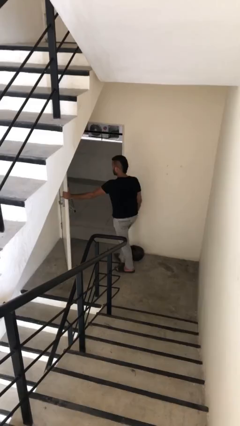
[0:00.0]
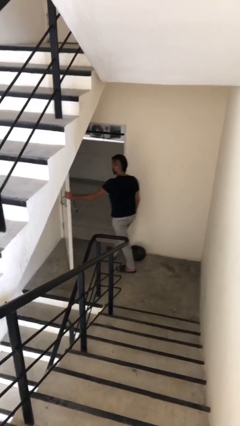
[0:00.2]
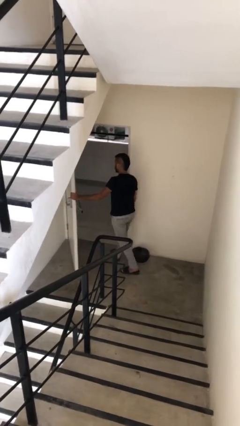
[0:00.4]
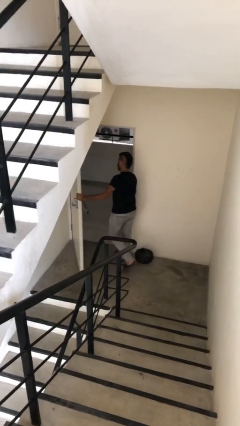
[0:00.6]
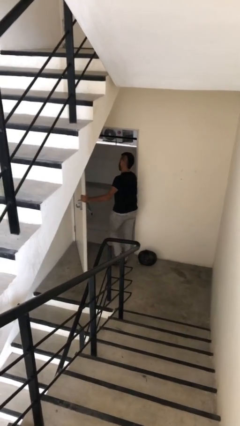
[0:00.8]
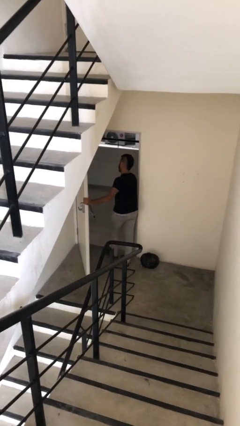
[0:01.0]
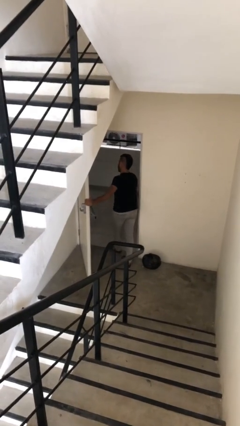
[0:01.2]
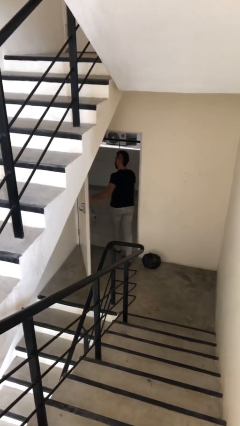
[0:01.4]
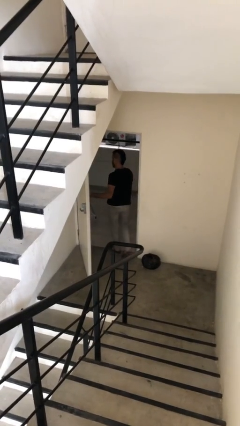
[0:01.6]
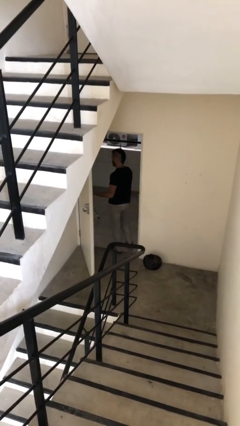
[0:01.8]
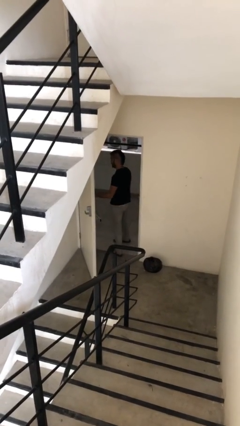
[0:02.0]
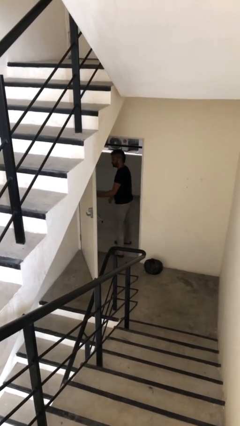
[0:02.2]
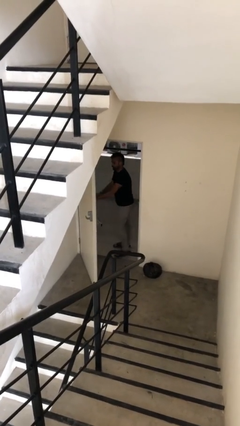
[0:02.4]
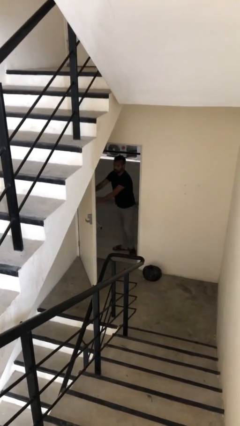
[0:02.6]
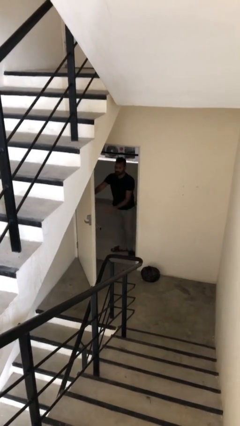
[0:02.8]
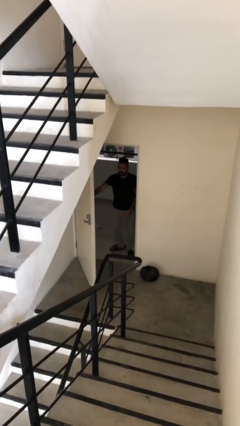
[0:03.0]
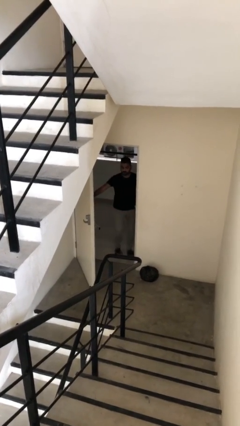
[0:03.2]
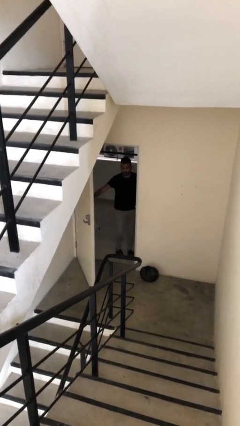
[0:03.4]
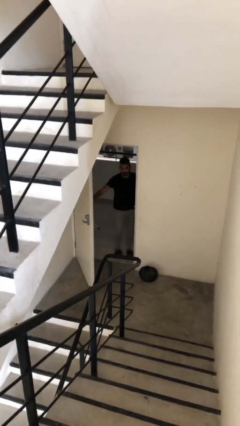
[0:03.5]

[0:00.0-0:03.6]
person exits scene through structure

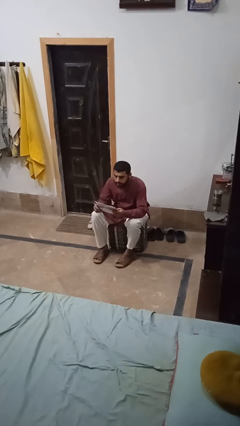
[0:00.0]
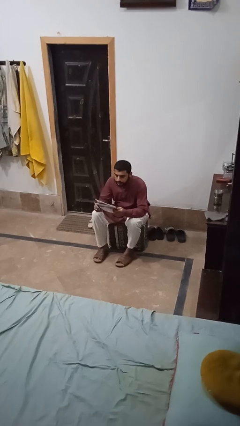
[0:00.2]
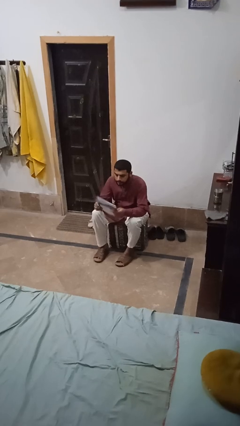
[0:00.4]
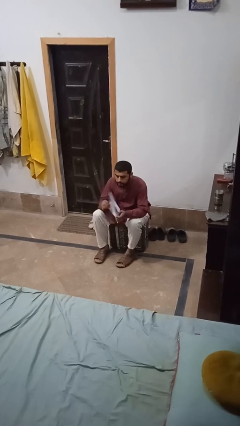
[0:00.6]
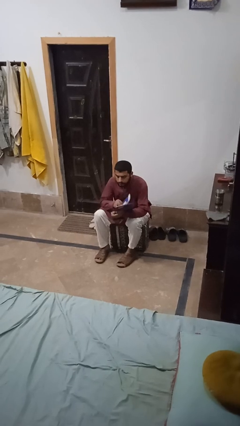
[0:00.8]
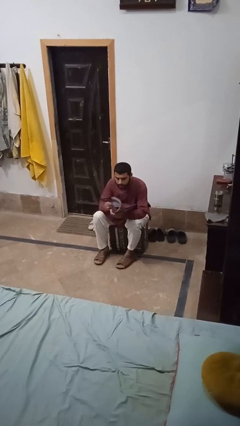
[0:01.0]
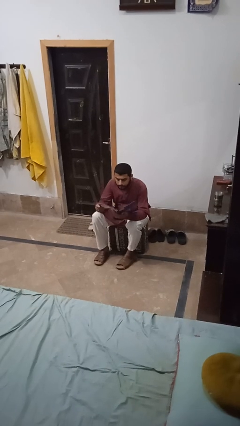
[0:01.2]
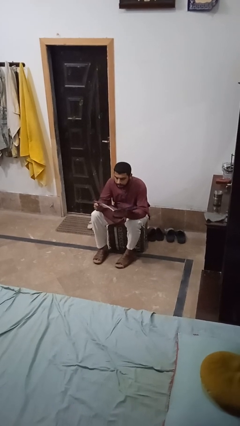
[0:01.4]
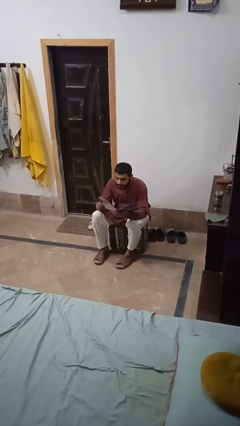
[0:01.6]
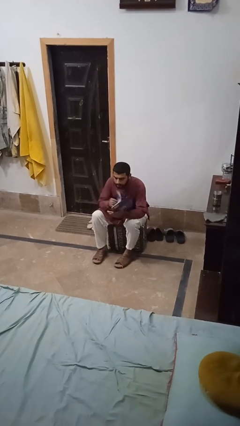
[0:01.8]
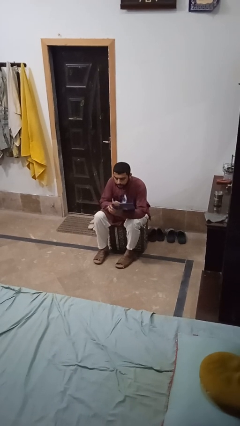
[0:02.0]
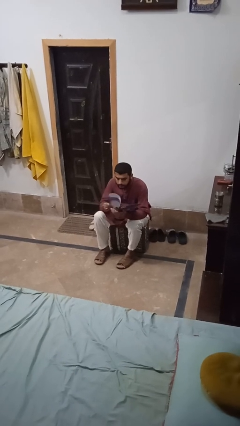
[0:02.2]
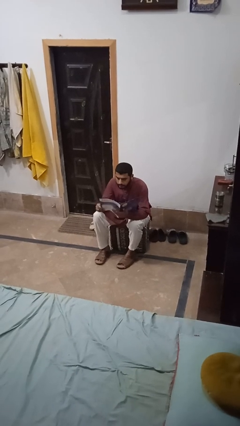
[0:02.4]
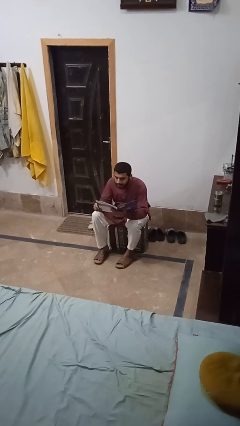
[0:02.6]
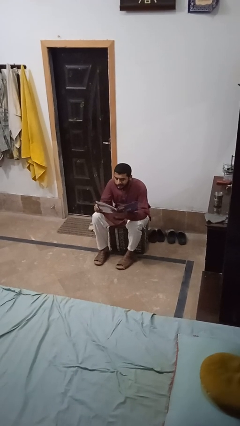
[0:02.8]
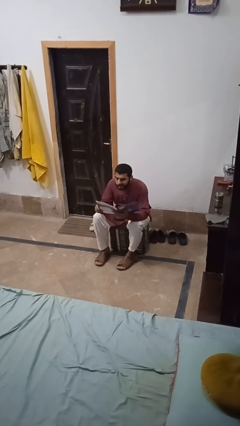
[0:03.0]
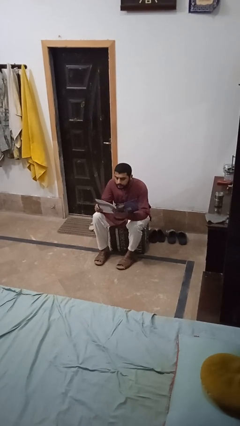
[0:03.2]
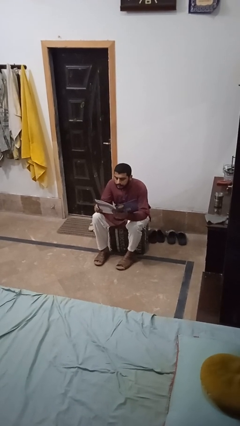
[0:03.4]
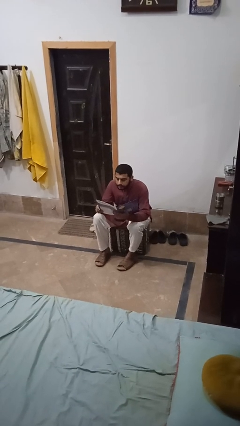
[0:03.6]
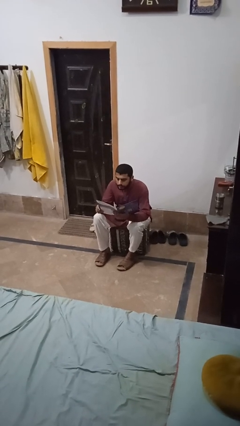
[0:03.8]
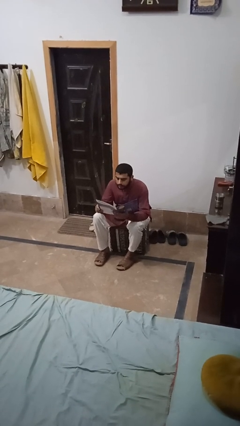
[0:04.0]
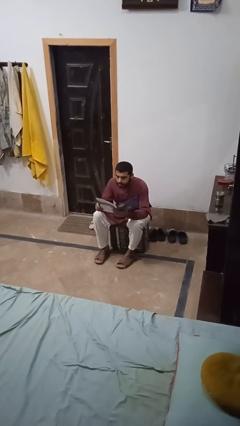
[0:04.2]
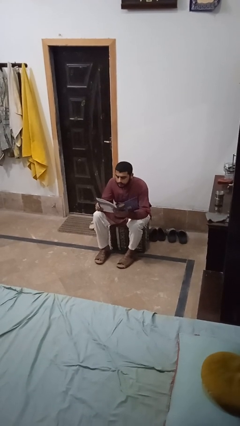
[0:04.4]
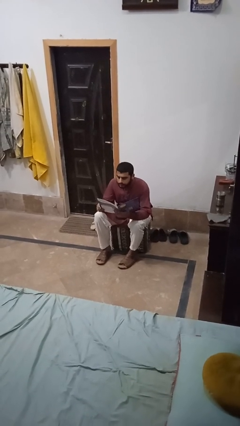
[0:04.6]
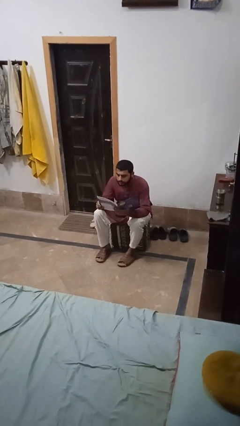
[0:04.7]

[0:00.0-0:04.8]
person reads magazine

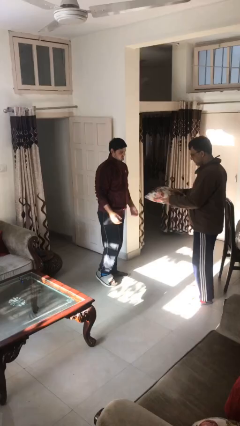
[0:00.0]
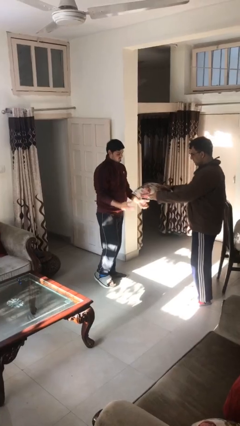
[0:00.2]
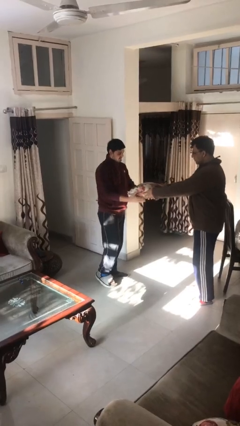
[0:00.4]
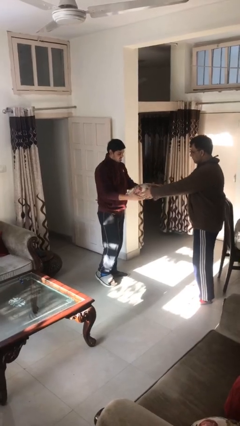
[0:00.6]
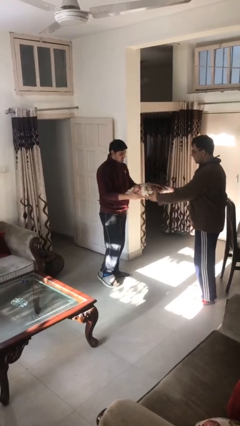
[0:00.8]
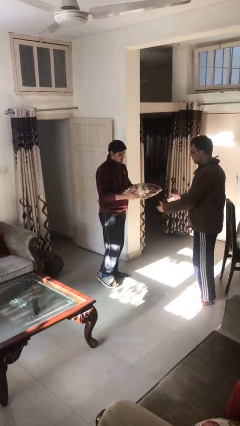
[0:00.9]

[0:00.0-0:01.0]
person transfers object to person

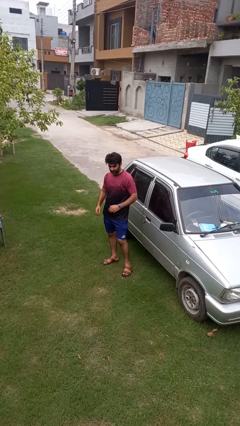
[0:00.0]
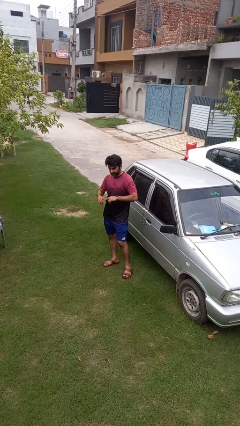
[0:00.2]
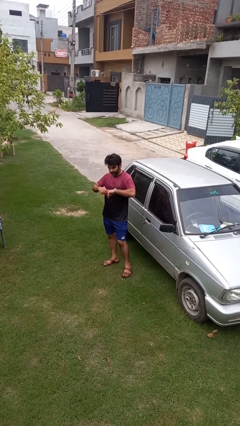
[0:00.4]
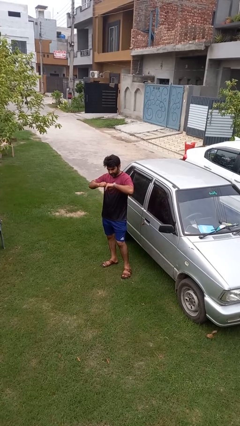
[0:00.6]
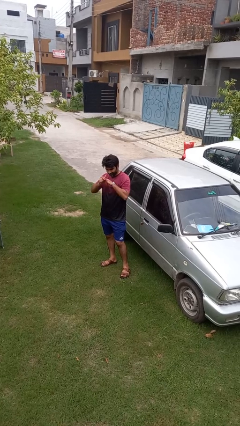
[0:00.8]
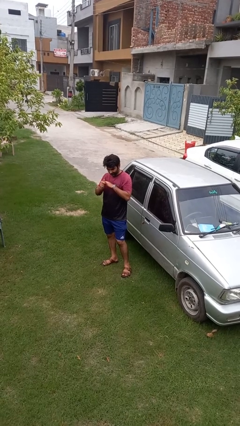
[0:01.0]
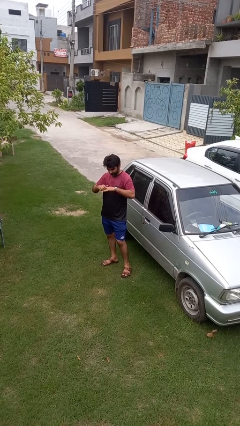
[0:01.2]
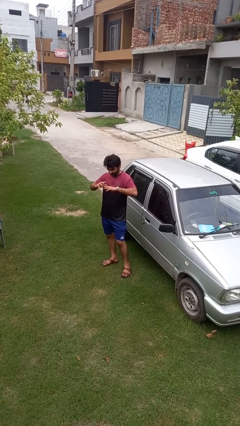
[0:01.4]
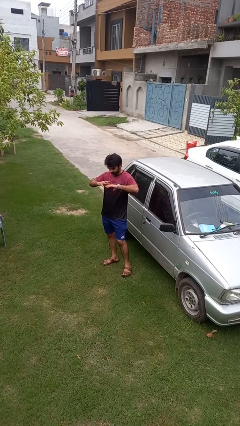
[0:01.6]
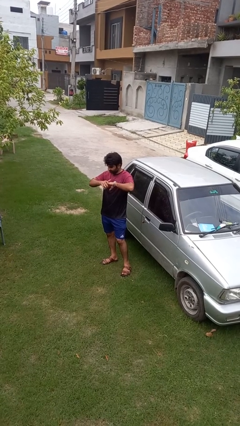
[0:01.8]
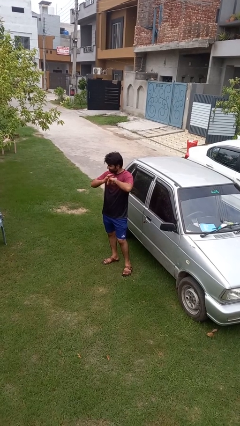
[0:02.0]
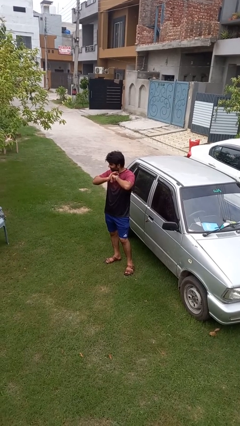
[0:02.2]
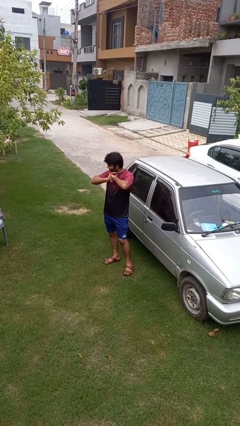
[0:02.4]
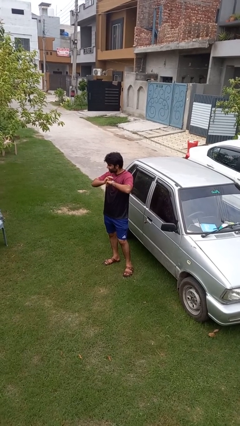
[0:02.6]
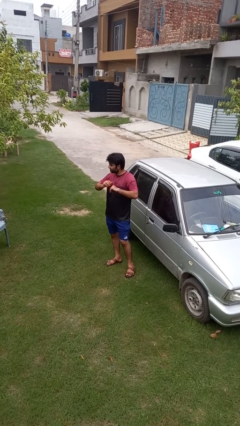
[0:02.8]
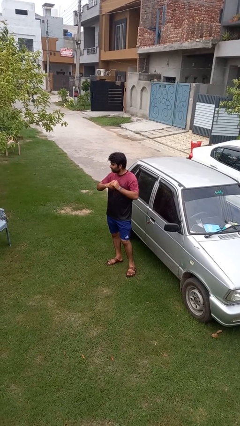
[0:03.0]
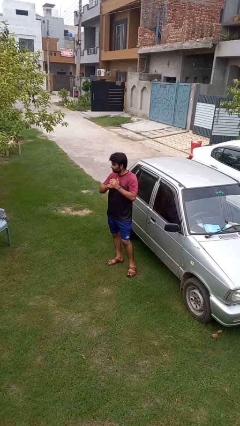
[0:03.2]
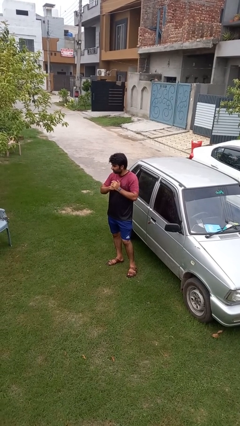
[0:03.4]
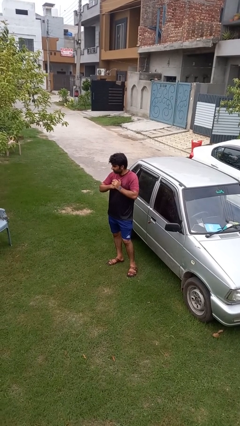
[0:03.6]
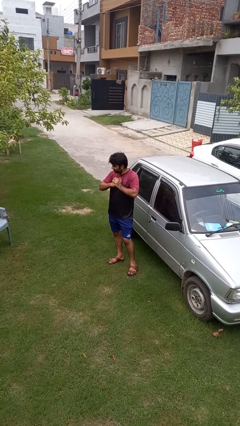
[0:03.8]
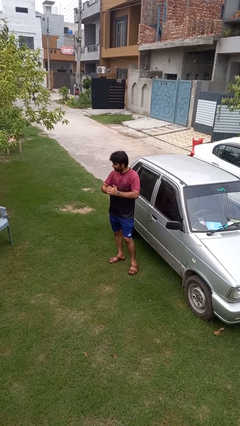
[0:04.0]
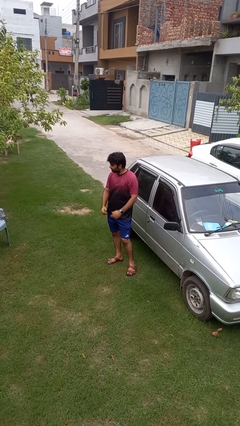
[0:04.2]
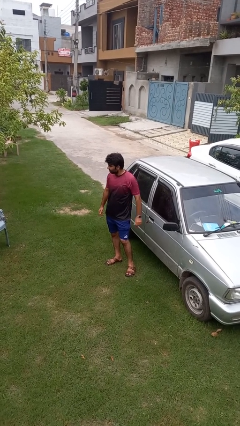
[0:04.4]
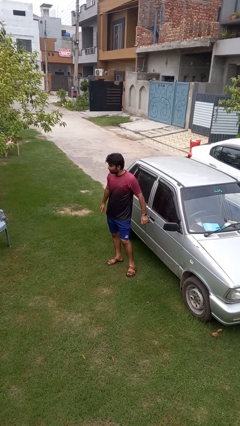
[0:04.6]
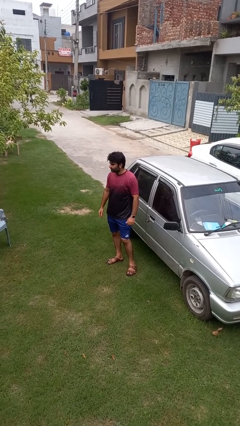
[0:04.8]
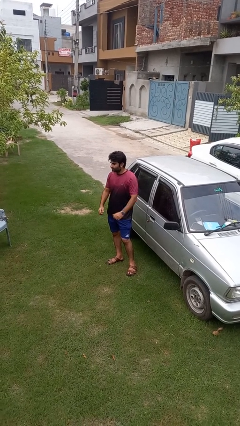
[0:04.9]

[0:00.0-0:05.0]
person cracks knuckles

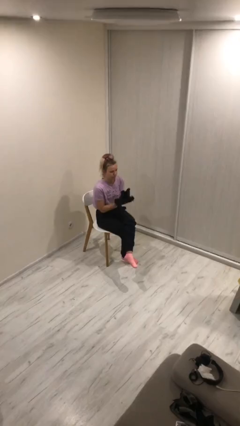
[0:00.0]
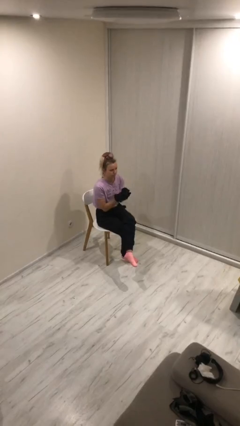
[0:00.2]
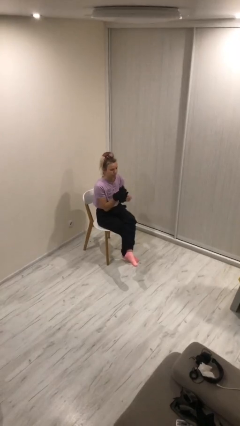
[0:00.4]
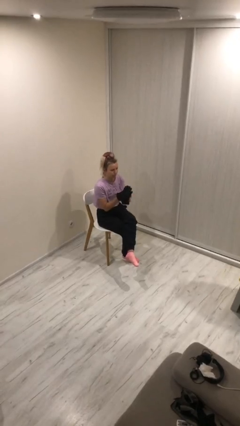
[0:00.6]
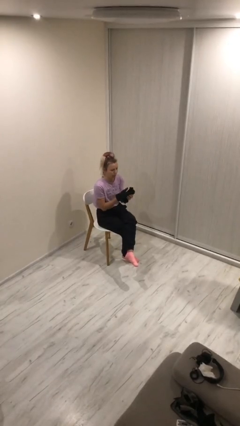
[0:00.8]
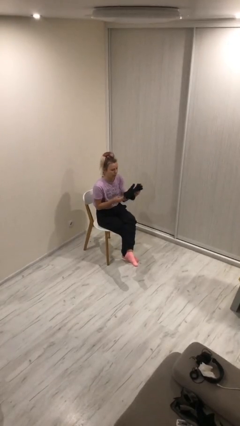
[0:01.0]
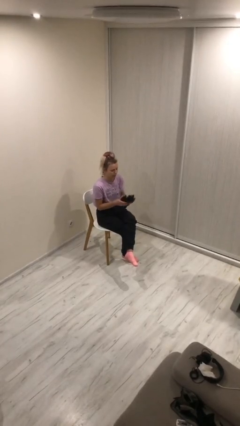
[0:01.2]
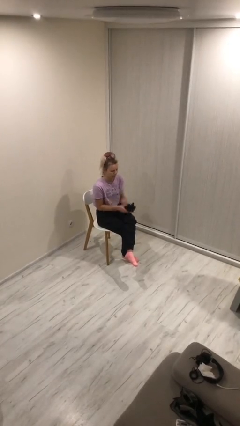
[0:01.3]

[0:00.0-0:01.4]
person takes off gloves

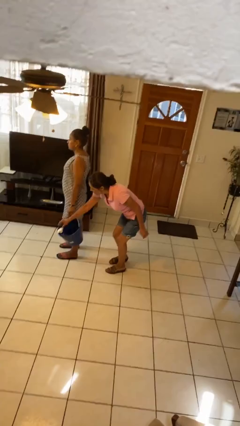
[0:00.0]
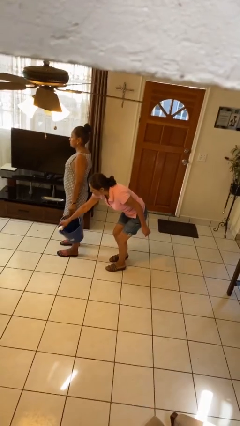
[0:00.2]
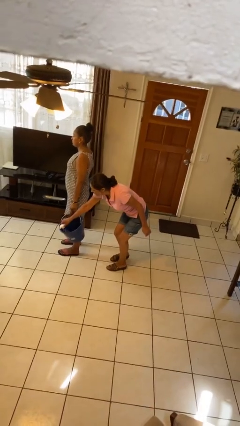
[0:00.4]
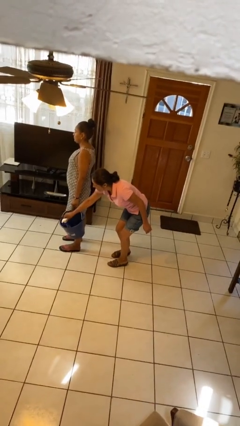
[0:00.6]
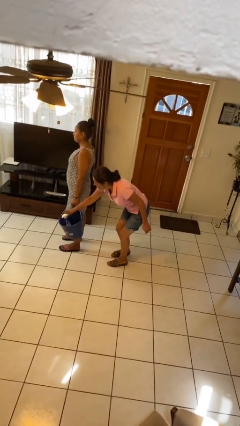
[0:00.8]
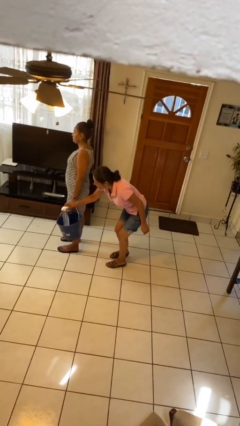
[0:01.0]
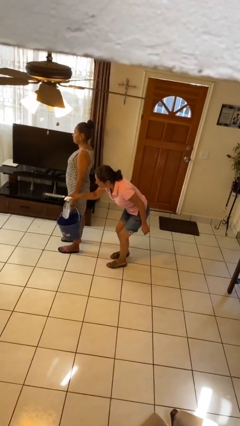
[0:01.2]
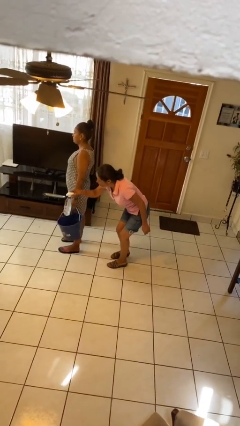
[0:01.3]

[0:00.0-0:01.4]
person steals object from person

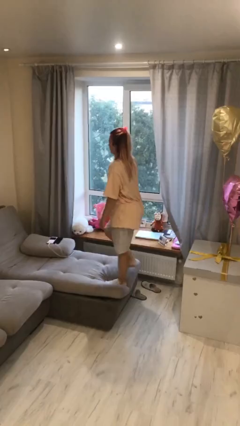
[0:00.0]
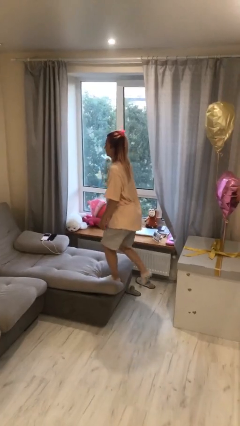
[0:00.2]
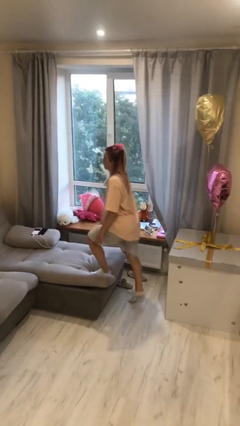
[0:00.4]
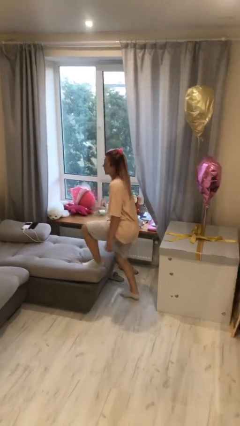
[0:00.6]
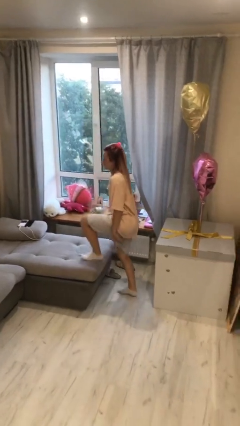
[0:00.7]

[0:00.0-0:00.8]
person climbs off couch
